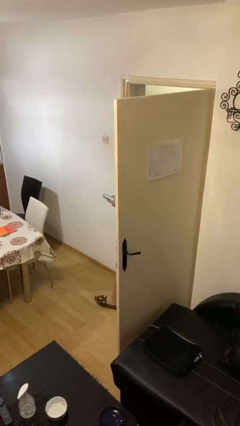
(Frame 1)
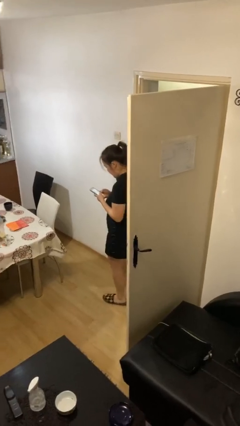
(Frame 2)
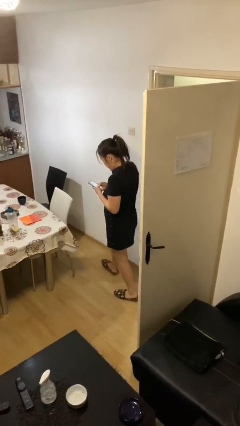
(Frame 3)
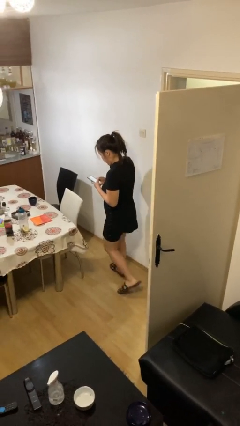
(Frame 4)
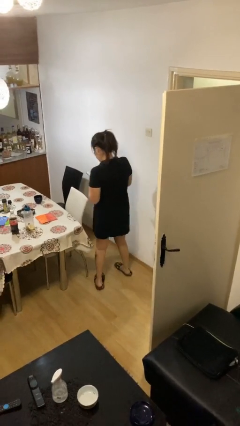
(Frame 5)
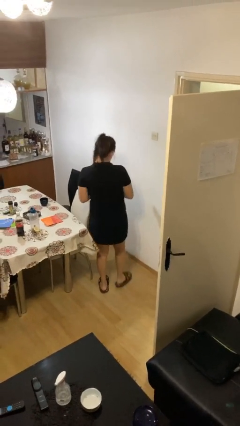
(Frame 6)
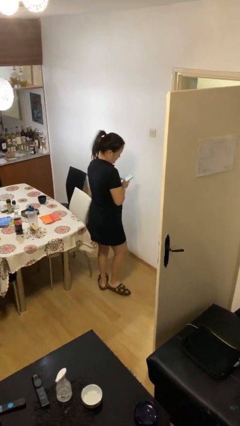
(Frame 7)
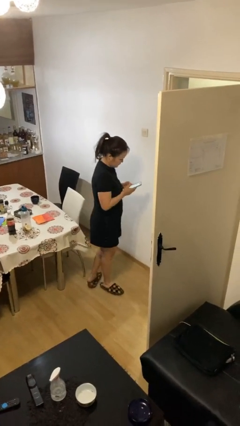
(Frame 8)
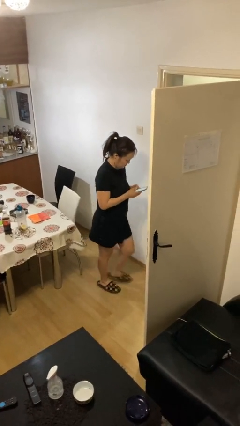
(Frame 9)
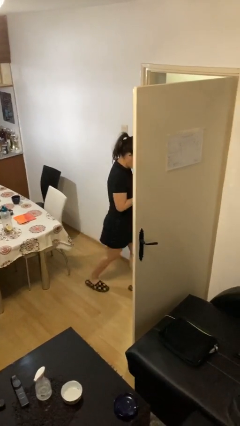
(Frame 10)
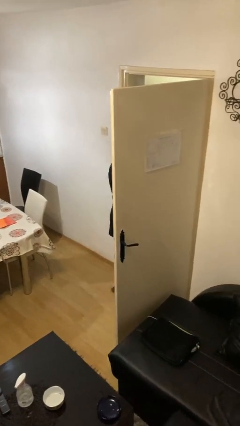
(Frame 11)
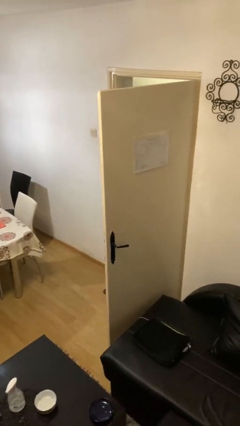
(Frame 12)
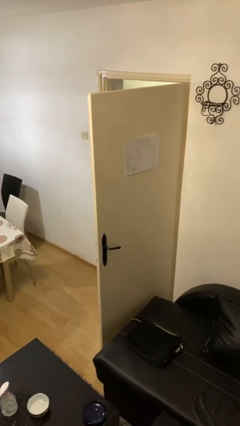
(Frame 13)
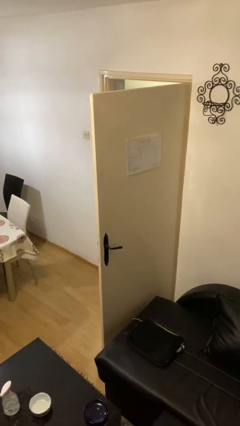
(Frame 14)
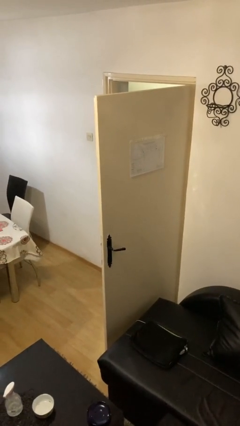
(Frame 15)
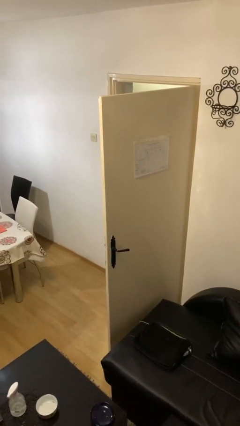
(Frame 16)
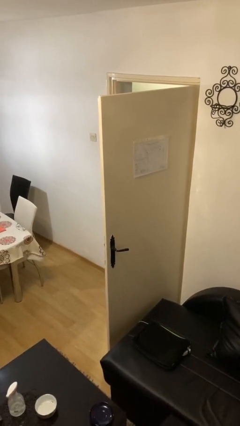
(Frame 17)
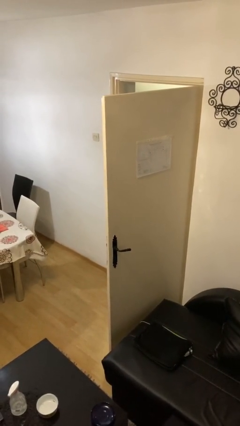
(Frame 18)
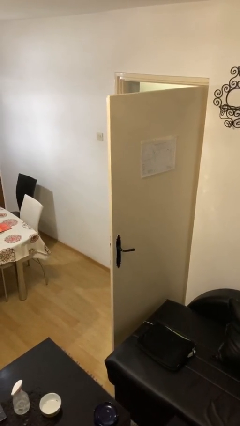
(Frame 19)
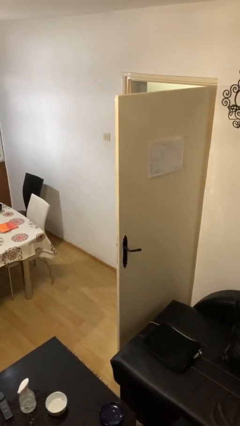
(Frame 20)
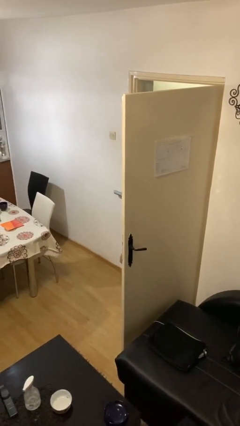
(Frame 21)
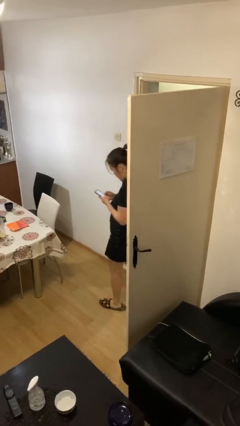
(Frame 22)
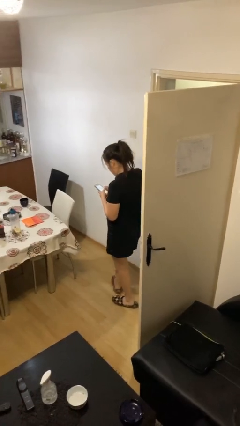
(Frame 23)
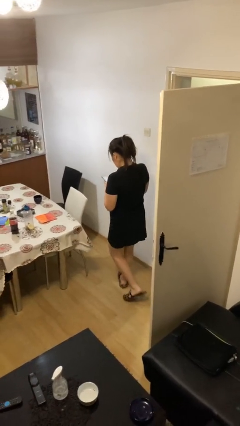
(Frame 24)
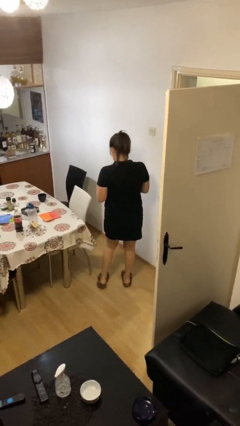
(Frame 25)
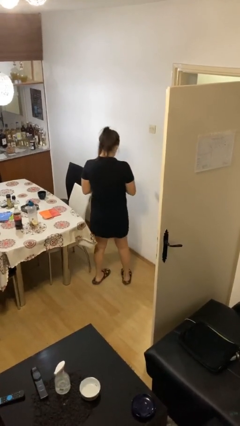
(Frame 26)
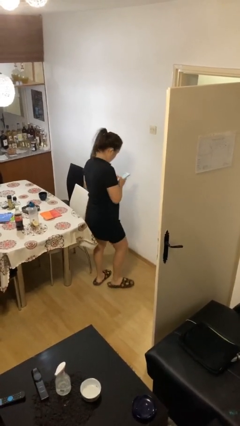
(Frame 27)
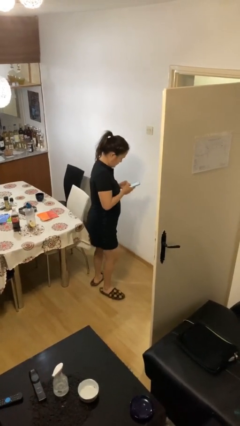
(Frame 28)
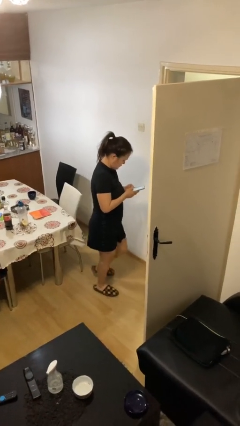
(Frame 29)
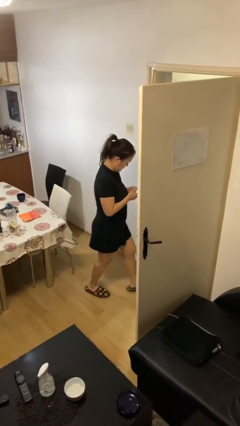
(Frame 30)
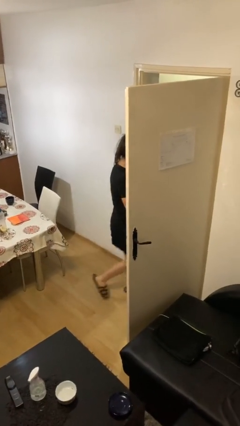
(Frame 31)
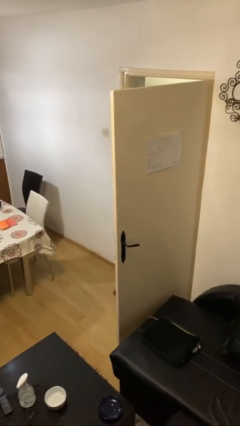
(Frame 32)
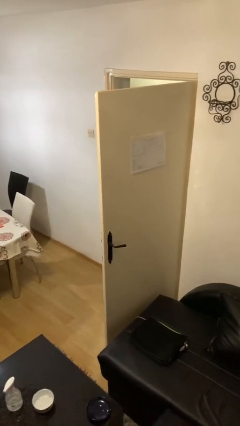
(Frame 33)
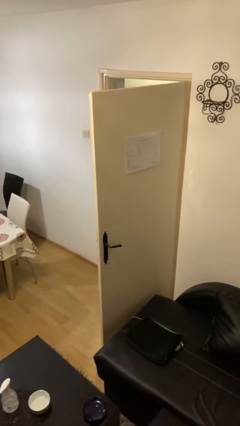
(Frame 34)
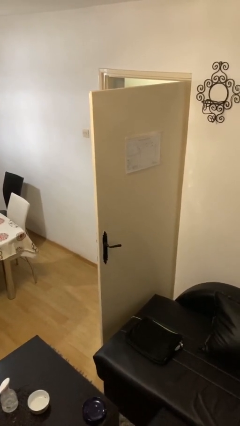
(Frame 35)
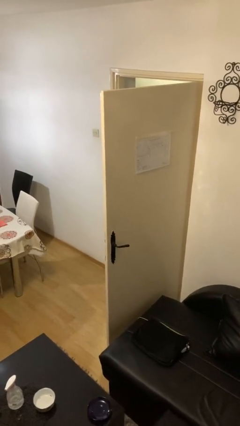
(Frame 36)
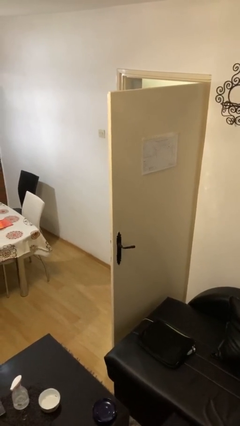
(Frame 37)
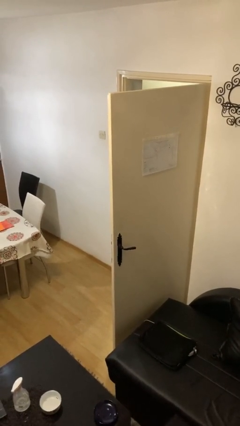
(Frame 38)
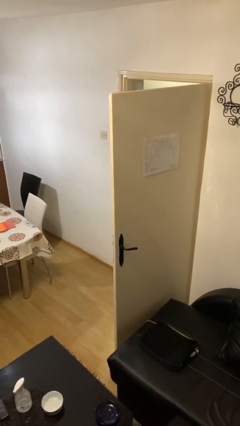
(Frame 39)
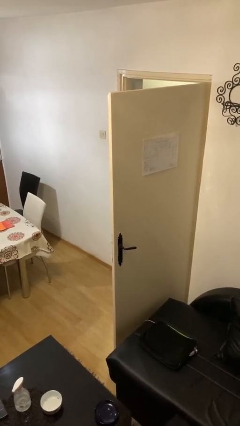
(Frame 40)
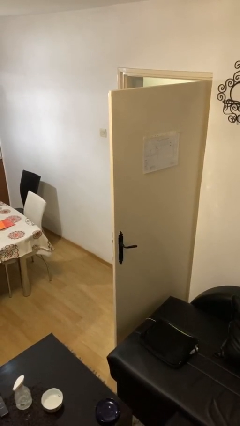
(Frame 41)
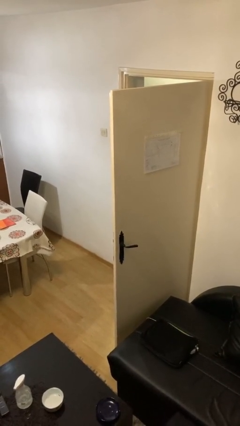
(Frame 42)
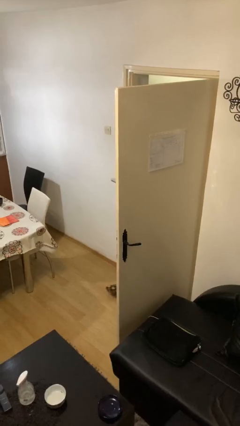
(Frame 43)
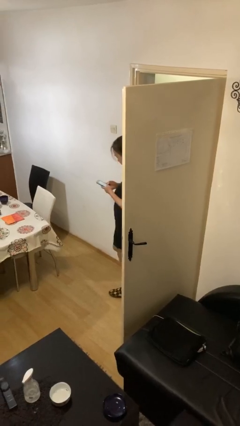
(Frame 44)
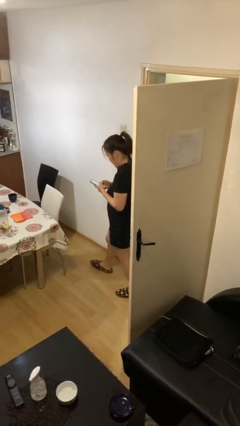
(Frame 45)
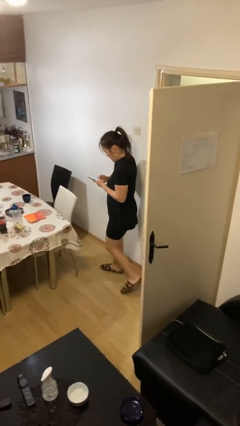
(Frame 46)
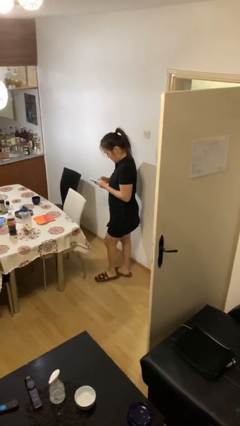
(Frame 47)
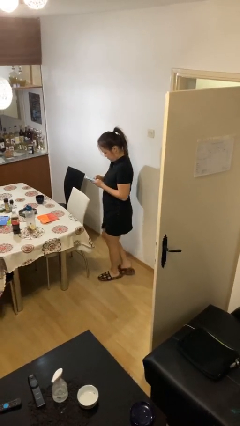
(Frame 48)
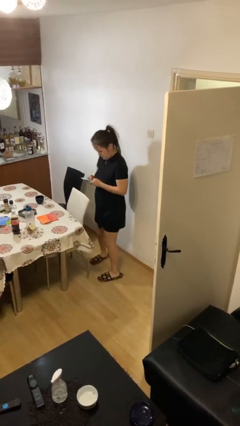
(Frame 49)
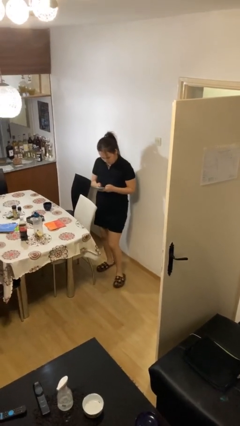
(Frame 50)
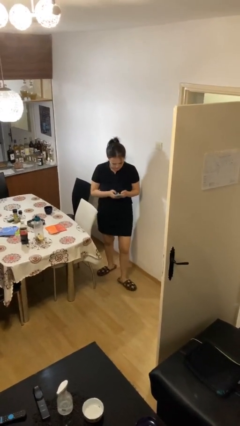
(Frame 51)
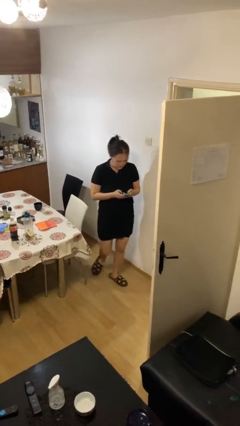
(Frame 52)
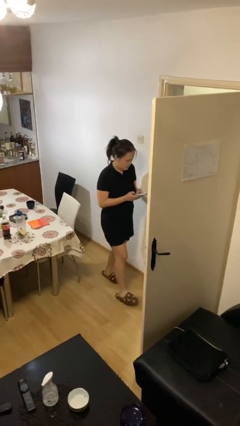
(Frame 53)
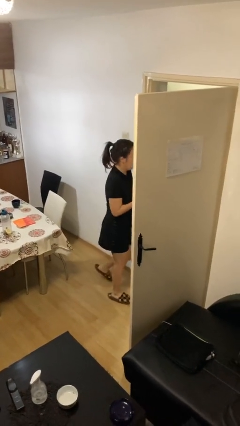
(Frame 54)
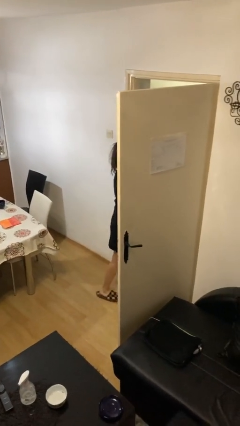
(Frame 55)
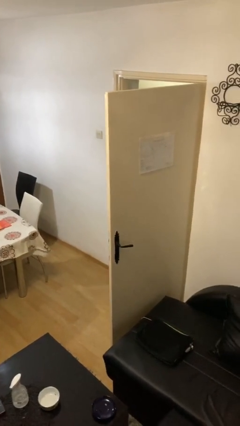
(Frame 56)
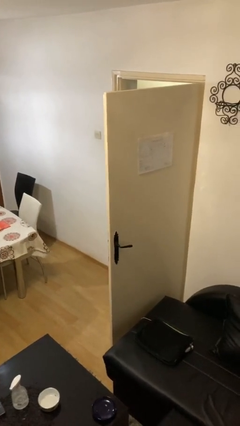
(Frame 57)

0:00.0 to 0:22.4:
person texts on phone

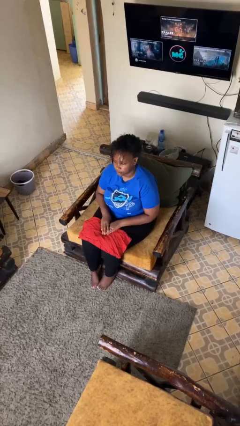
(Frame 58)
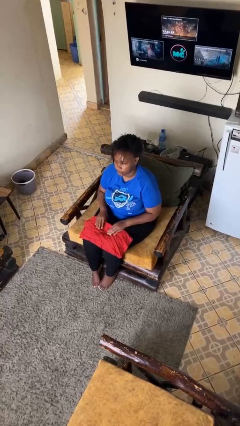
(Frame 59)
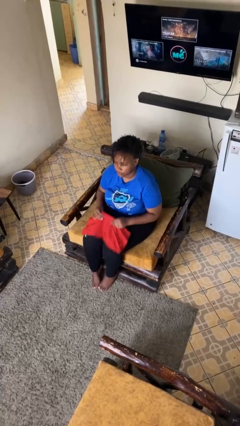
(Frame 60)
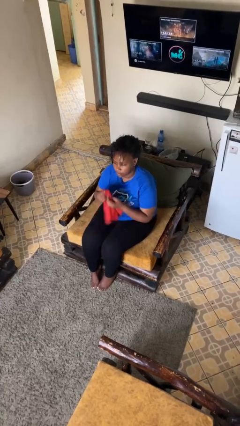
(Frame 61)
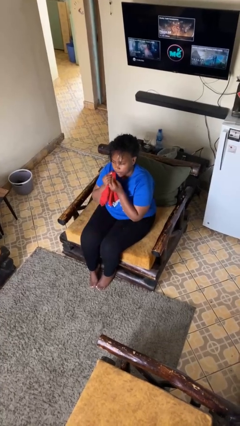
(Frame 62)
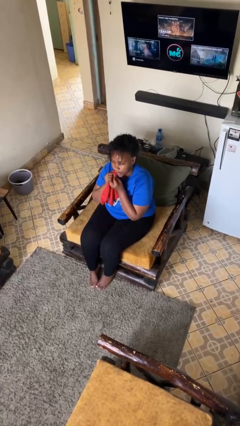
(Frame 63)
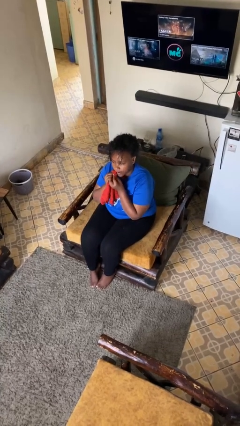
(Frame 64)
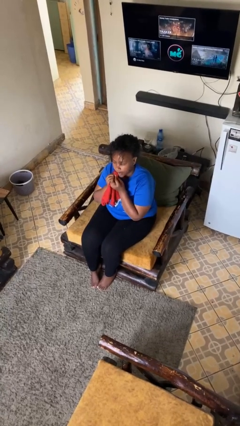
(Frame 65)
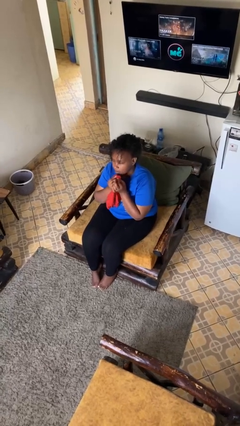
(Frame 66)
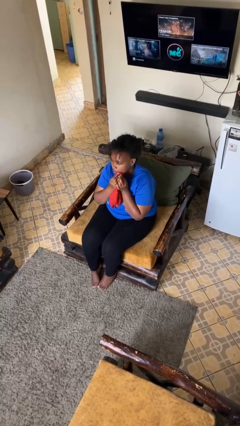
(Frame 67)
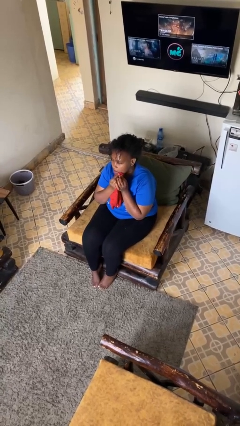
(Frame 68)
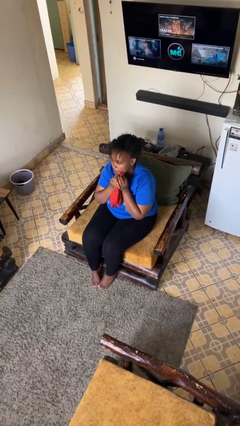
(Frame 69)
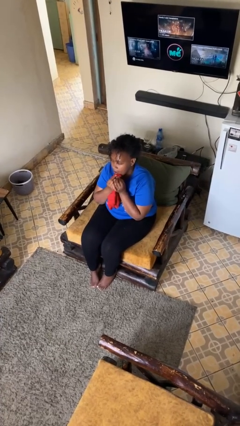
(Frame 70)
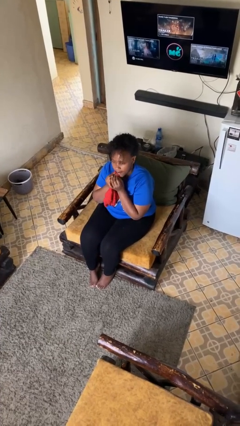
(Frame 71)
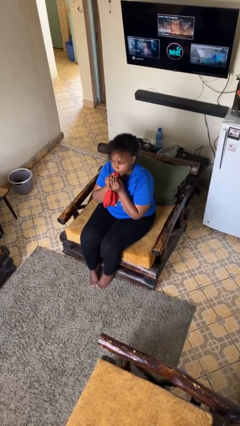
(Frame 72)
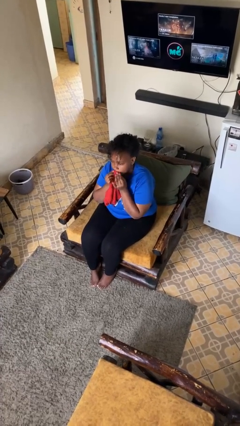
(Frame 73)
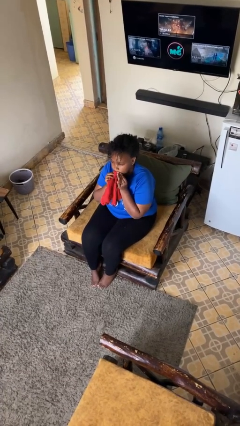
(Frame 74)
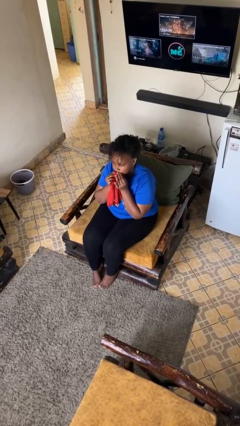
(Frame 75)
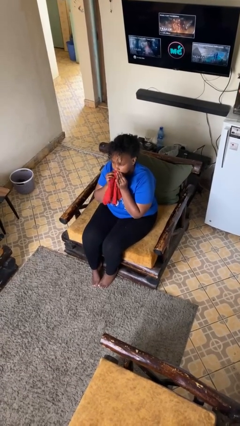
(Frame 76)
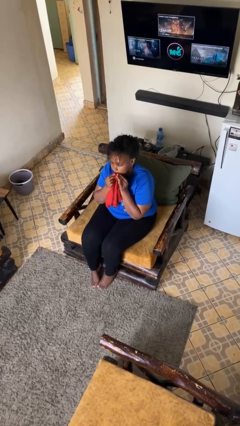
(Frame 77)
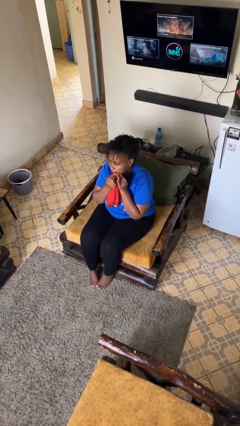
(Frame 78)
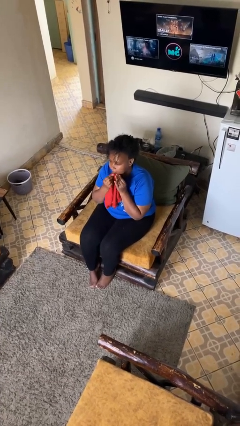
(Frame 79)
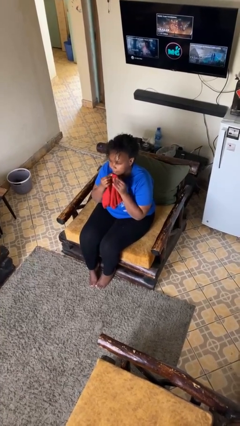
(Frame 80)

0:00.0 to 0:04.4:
person wipes mouth with napkin

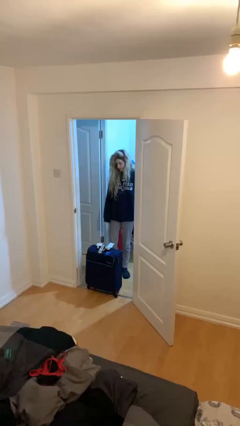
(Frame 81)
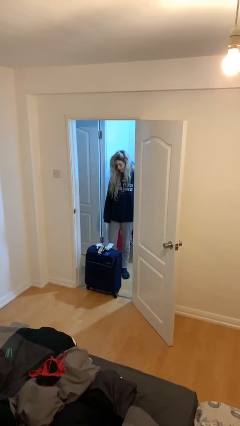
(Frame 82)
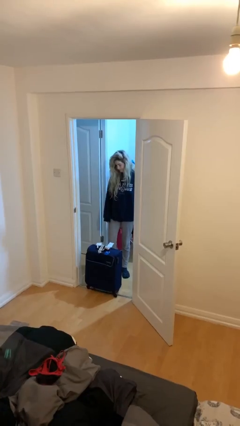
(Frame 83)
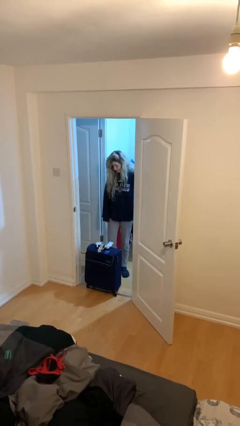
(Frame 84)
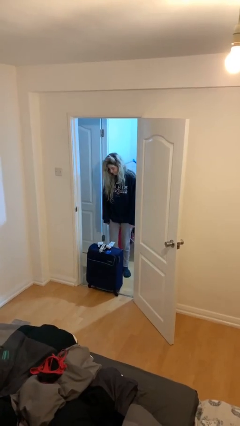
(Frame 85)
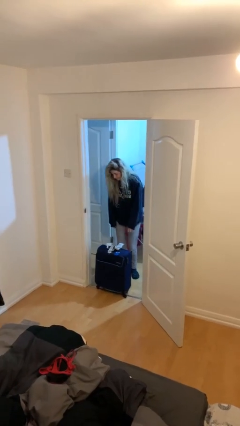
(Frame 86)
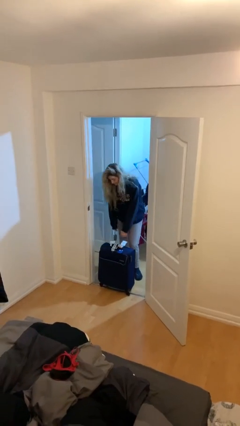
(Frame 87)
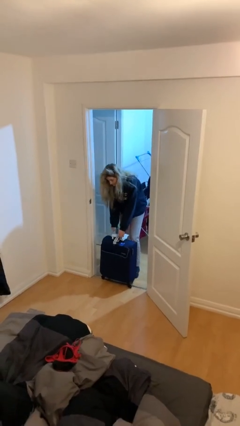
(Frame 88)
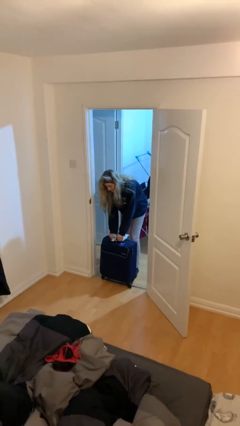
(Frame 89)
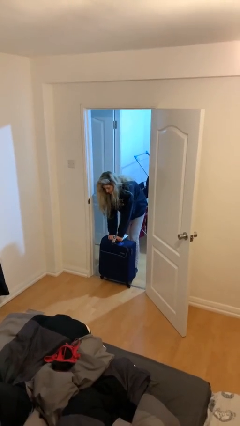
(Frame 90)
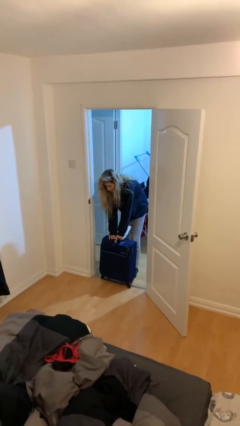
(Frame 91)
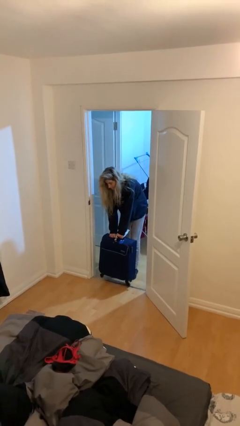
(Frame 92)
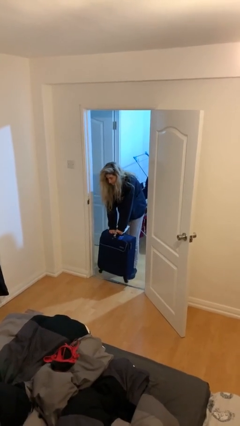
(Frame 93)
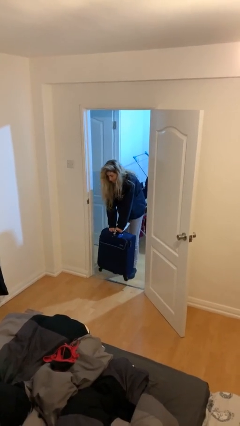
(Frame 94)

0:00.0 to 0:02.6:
person picks up object from floor
